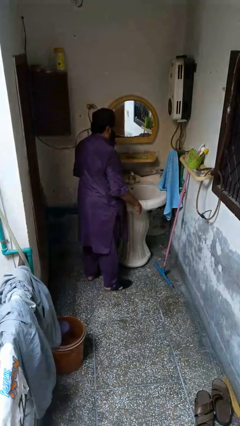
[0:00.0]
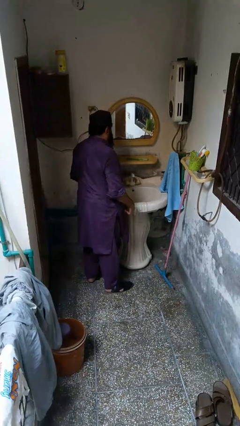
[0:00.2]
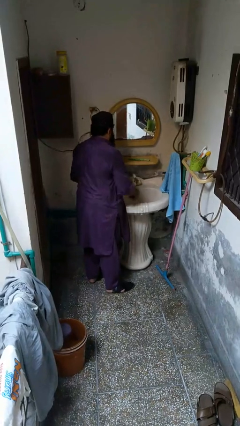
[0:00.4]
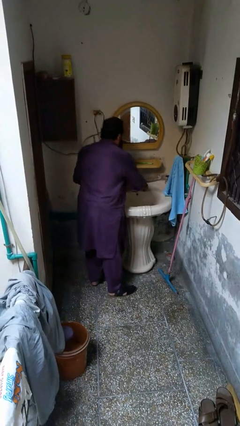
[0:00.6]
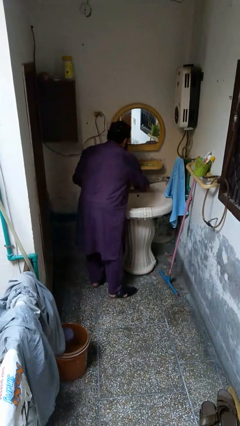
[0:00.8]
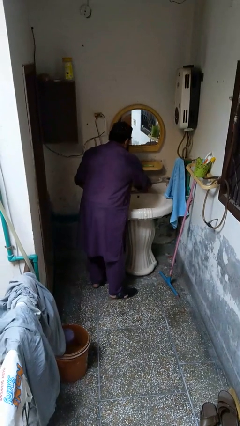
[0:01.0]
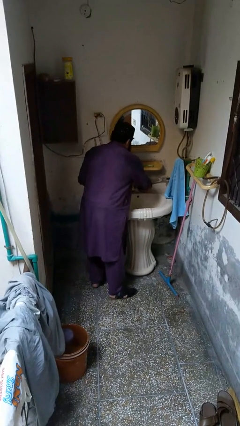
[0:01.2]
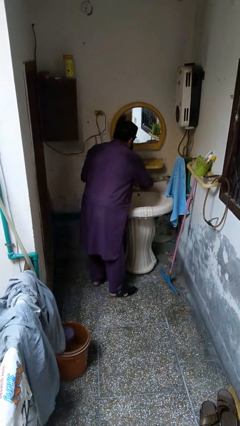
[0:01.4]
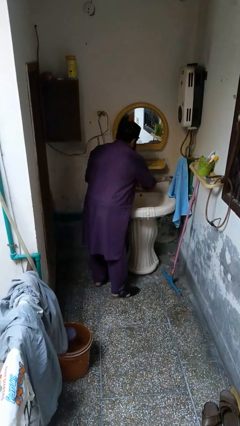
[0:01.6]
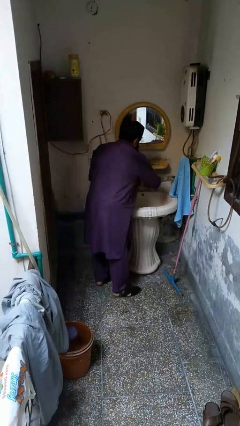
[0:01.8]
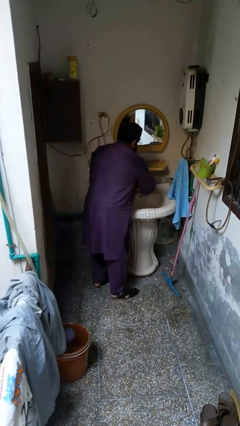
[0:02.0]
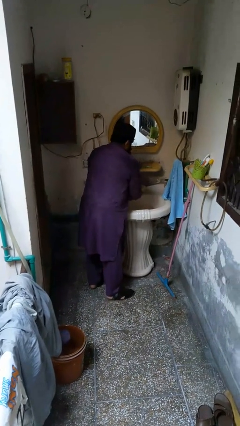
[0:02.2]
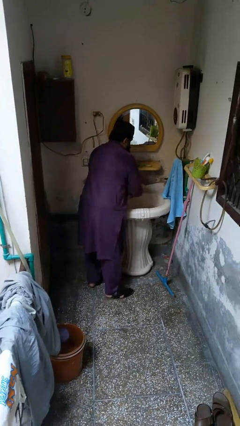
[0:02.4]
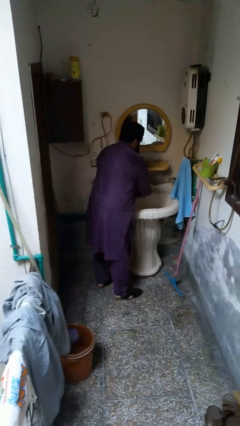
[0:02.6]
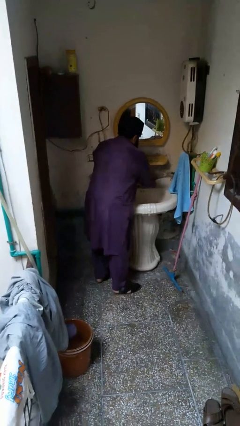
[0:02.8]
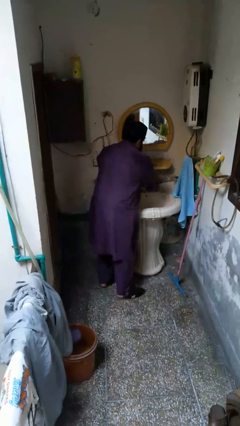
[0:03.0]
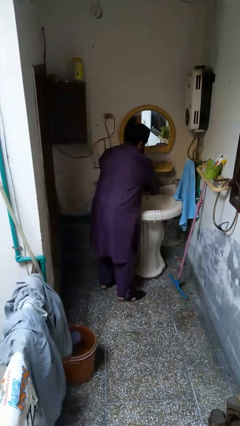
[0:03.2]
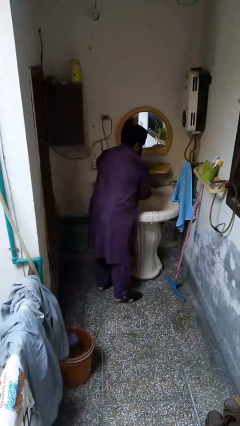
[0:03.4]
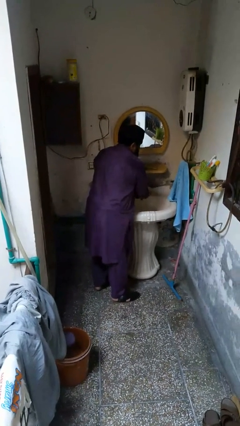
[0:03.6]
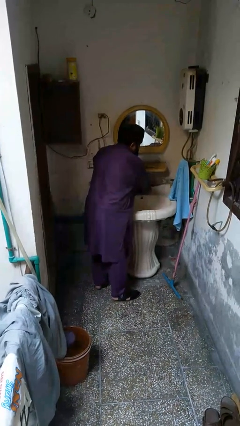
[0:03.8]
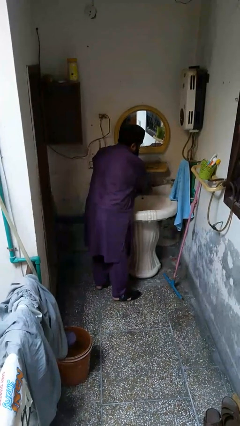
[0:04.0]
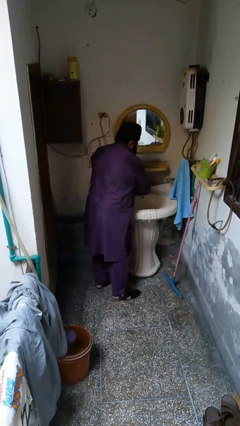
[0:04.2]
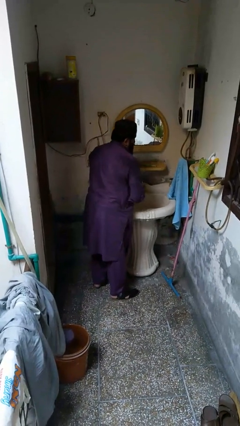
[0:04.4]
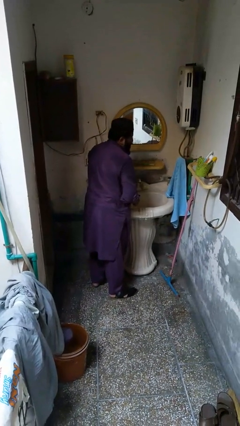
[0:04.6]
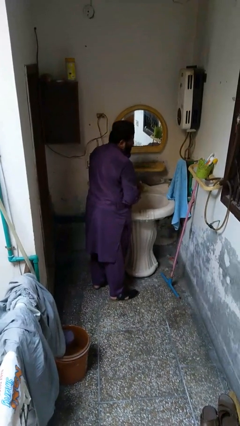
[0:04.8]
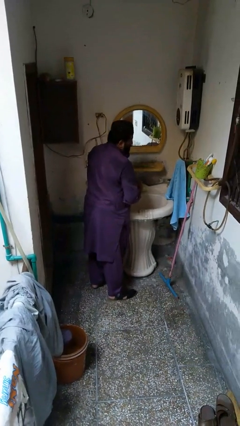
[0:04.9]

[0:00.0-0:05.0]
person washes hands

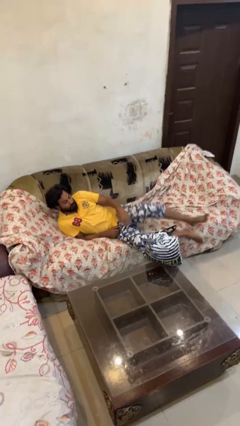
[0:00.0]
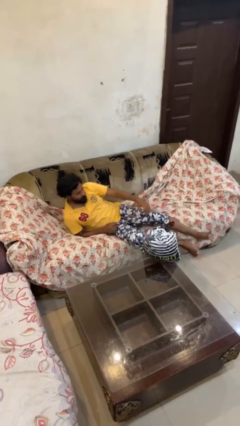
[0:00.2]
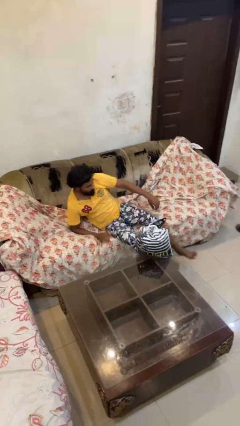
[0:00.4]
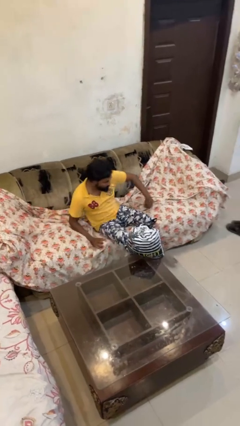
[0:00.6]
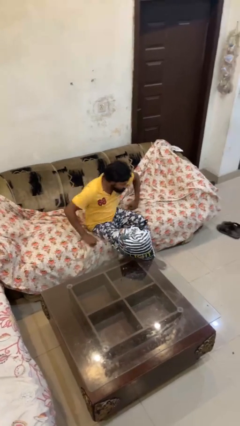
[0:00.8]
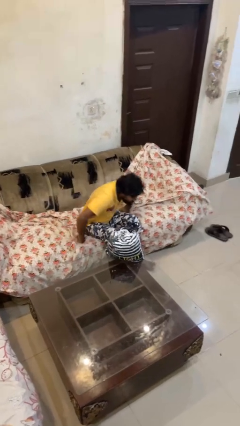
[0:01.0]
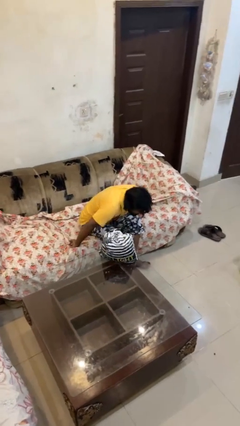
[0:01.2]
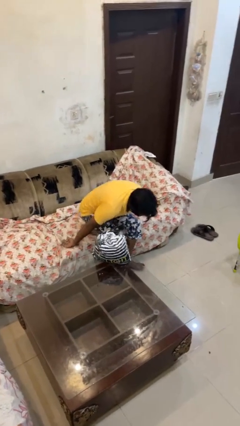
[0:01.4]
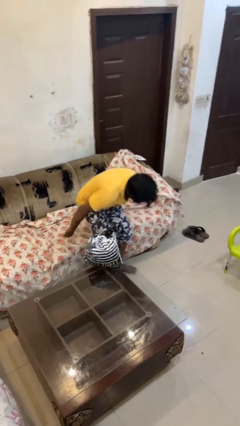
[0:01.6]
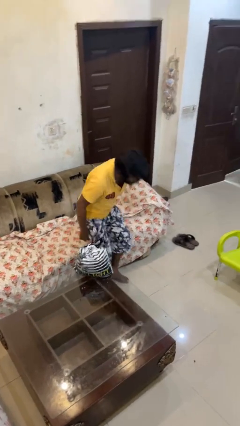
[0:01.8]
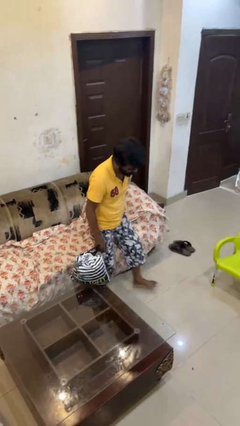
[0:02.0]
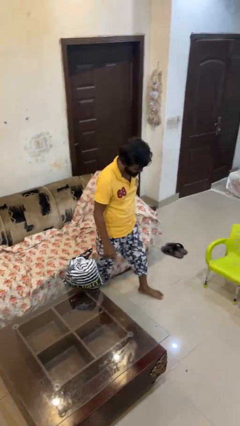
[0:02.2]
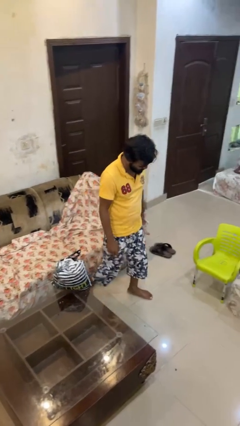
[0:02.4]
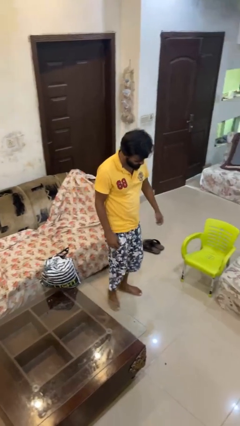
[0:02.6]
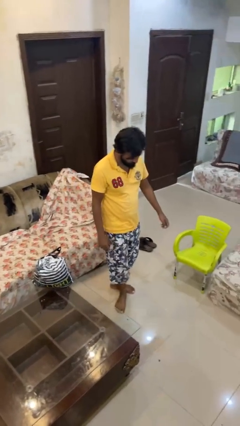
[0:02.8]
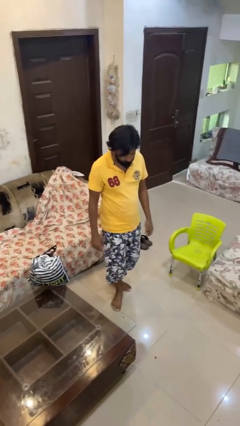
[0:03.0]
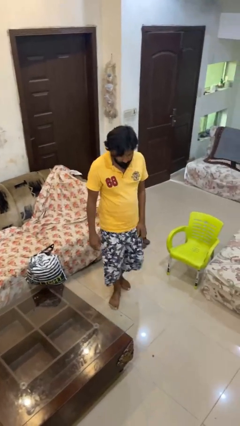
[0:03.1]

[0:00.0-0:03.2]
person stands up

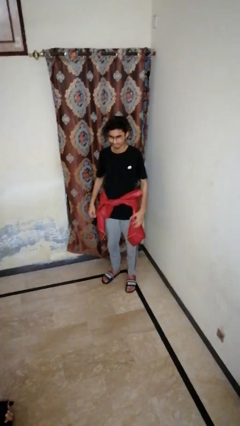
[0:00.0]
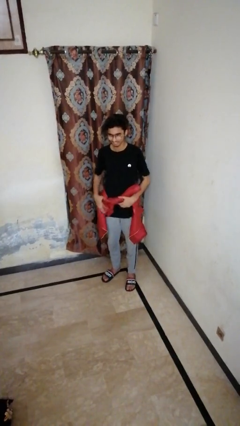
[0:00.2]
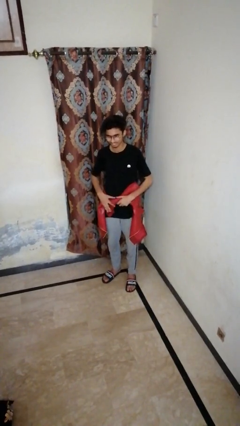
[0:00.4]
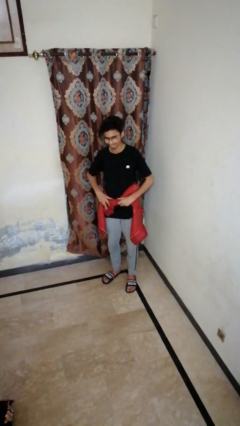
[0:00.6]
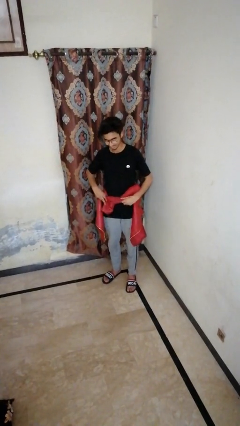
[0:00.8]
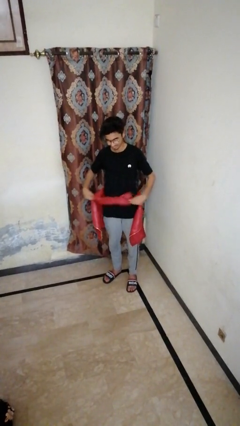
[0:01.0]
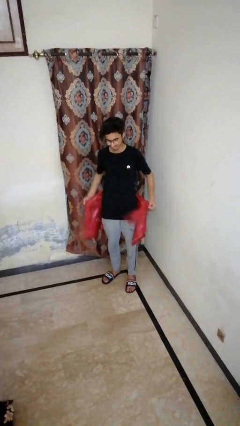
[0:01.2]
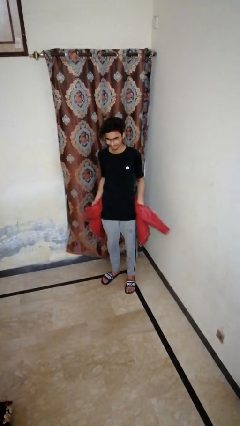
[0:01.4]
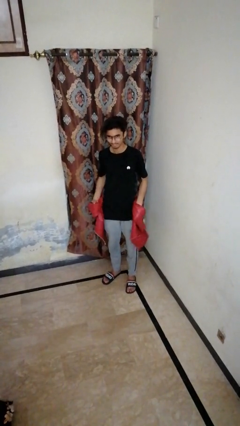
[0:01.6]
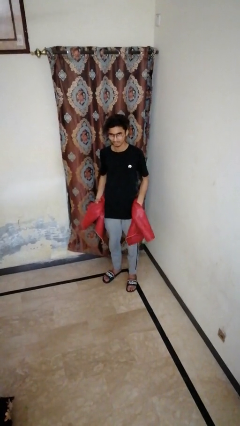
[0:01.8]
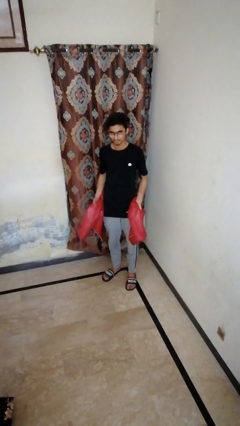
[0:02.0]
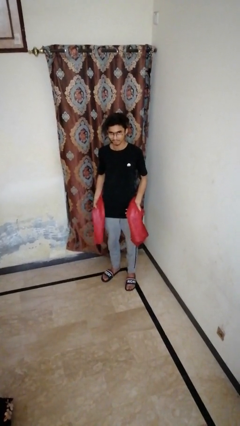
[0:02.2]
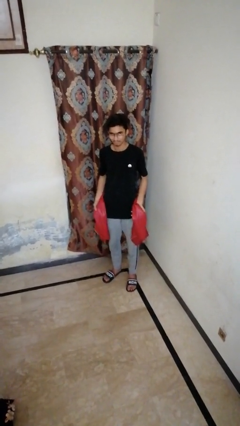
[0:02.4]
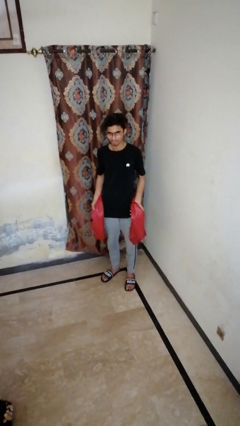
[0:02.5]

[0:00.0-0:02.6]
person unties jacket around waist

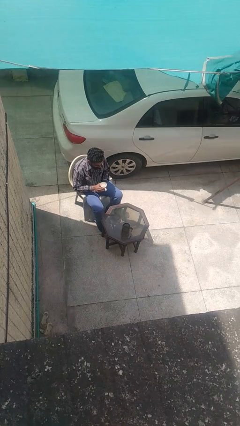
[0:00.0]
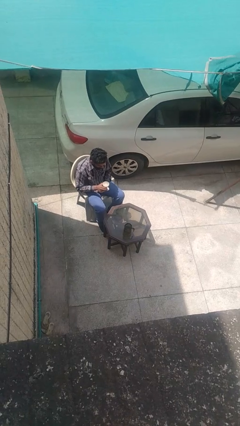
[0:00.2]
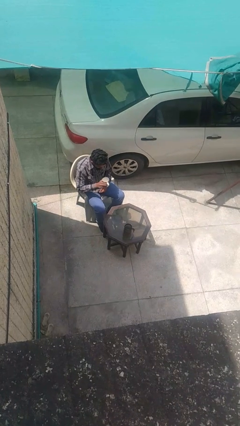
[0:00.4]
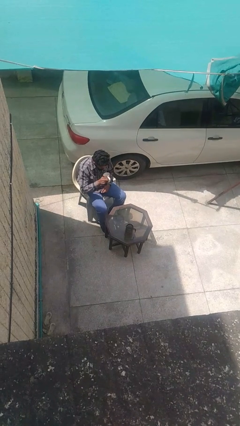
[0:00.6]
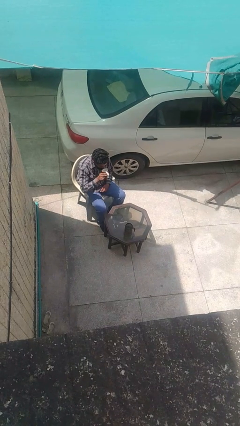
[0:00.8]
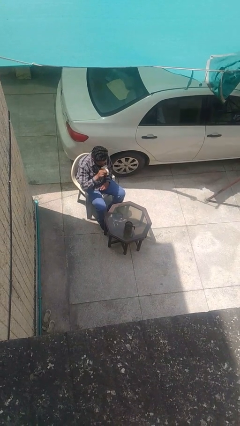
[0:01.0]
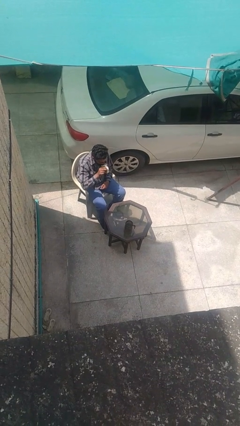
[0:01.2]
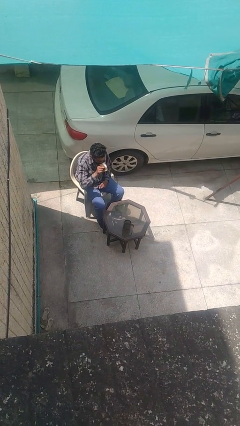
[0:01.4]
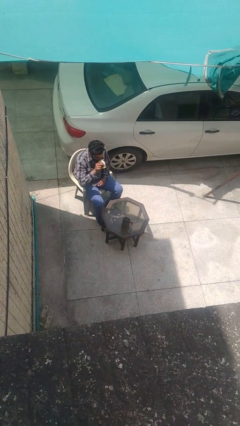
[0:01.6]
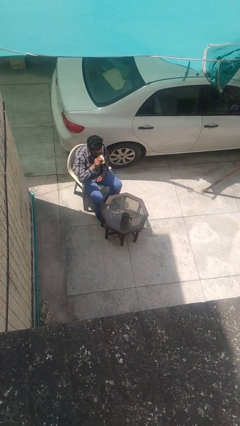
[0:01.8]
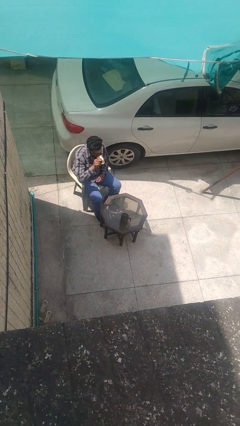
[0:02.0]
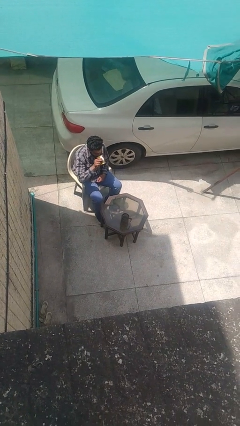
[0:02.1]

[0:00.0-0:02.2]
person drinks from mug

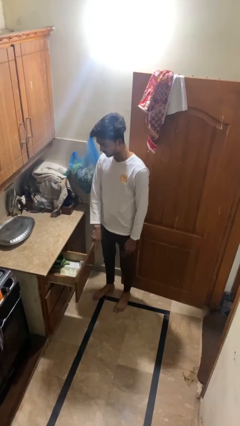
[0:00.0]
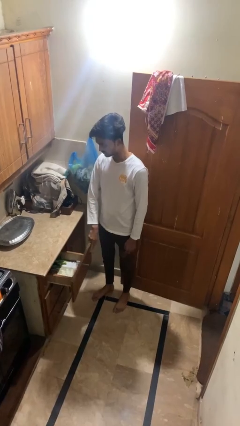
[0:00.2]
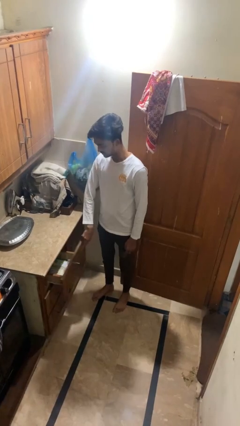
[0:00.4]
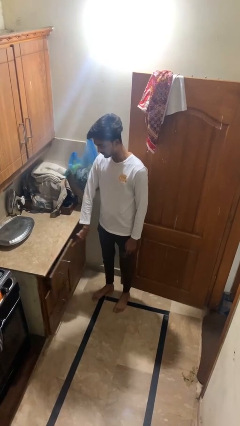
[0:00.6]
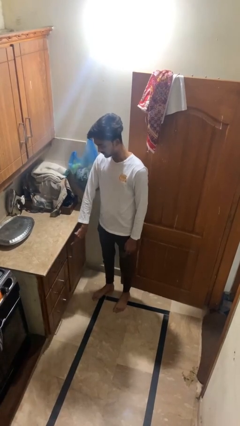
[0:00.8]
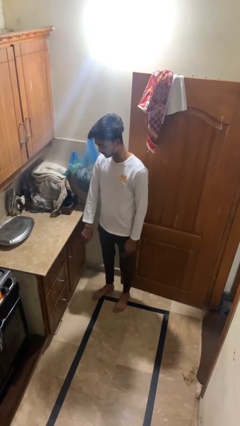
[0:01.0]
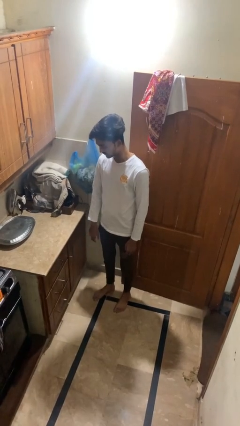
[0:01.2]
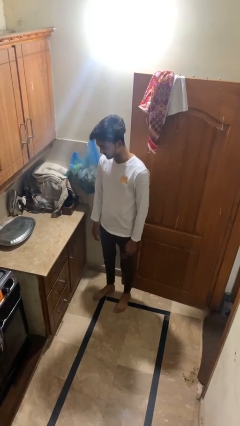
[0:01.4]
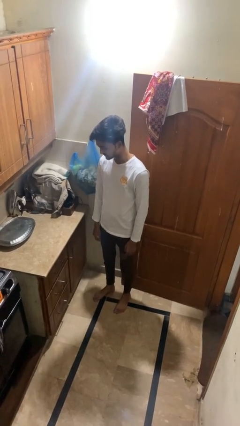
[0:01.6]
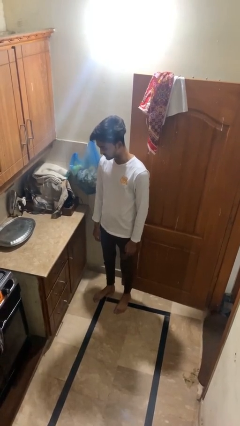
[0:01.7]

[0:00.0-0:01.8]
person closes kitchen drawer

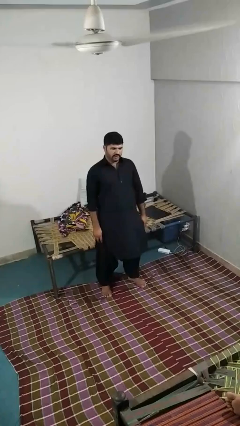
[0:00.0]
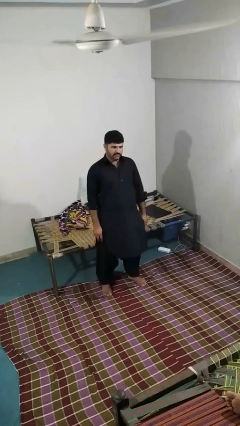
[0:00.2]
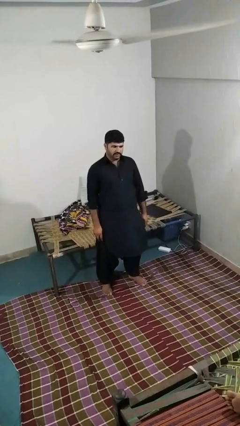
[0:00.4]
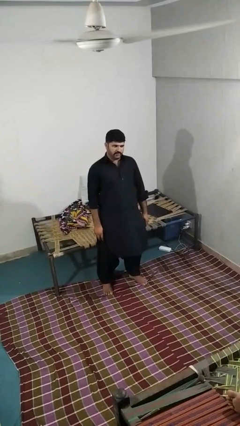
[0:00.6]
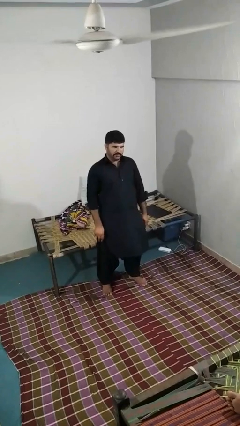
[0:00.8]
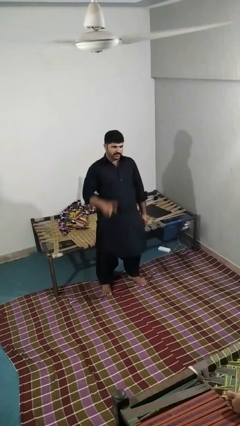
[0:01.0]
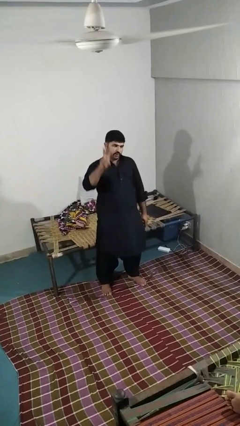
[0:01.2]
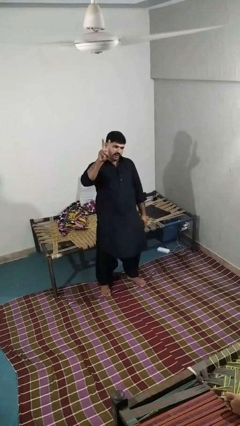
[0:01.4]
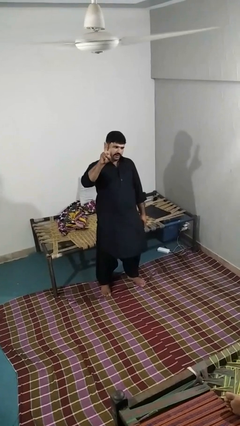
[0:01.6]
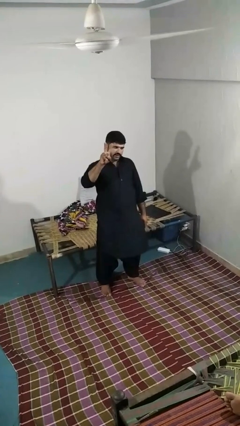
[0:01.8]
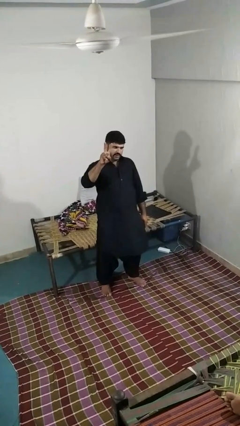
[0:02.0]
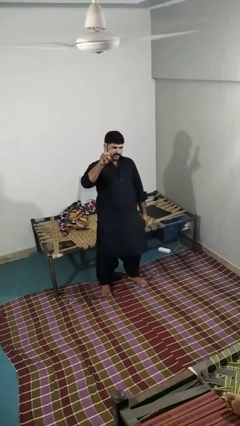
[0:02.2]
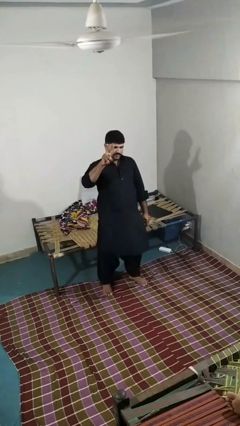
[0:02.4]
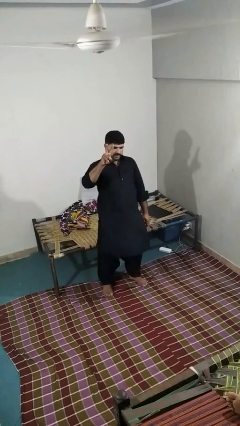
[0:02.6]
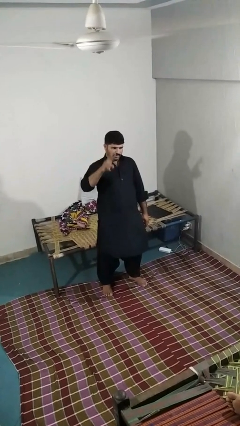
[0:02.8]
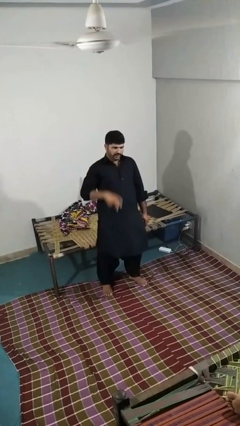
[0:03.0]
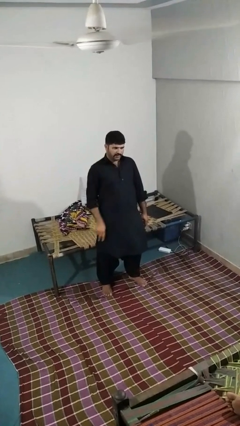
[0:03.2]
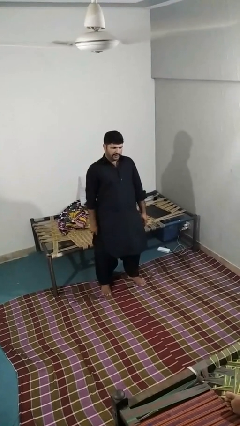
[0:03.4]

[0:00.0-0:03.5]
person gestures peace
